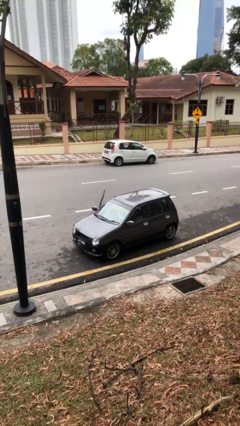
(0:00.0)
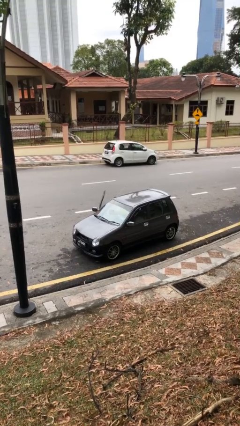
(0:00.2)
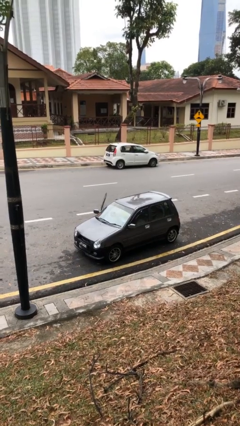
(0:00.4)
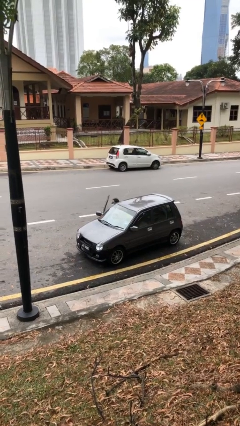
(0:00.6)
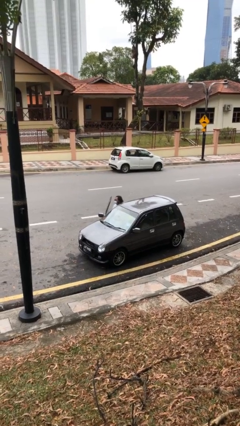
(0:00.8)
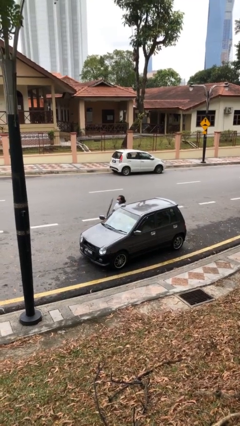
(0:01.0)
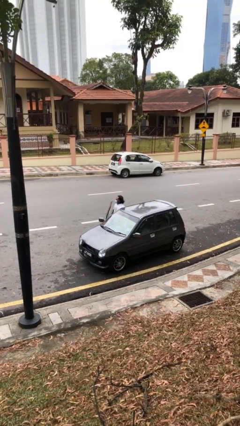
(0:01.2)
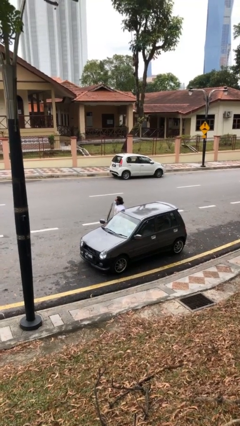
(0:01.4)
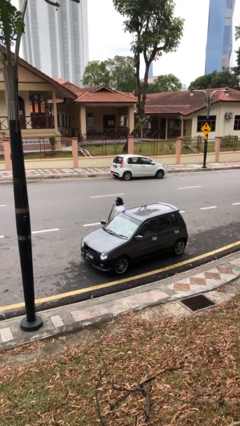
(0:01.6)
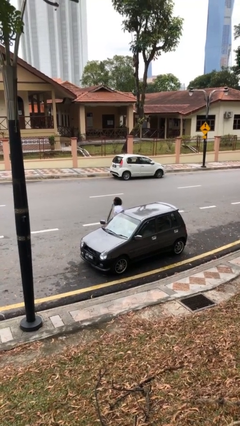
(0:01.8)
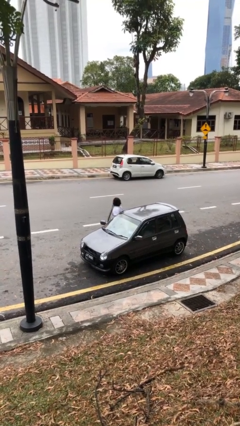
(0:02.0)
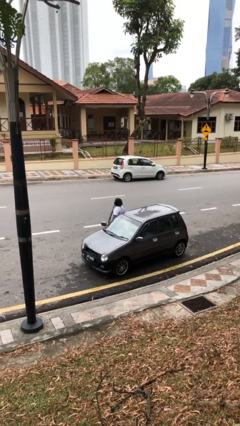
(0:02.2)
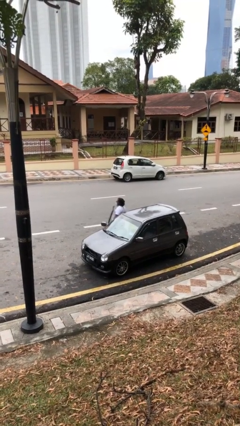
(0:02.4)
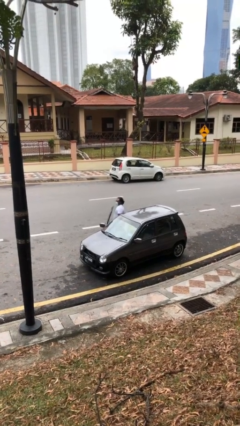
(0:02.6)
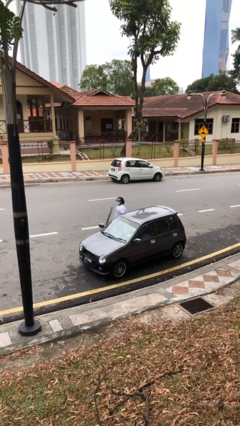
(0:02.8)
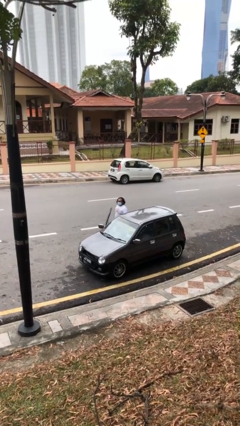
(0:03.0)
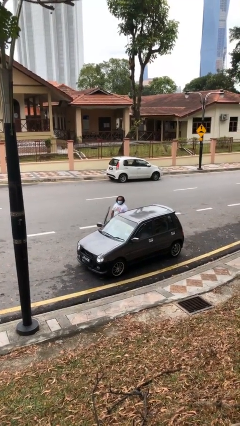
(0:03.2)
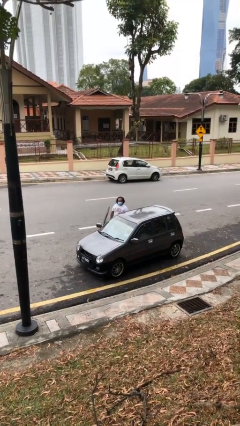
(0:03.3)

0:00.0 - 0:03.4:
person exits car

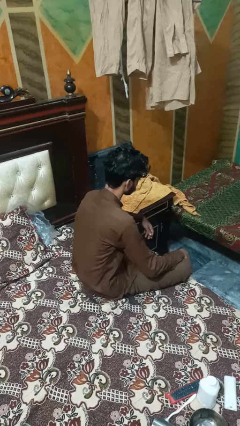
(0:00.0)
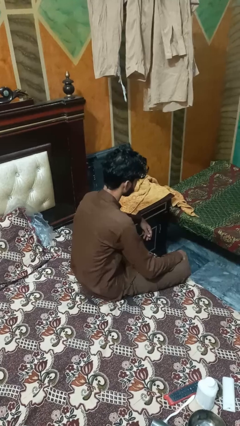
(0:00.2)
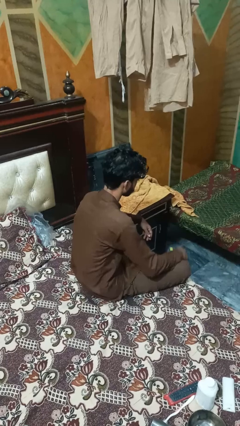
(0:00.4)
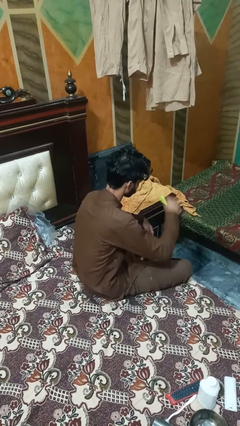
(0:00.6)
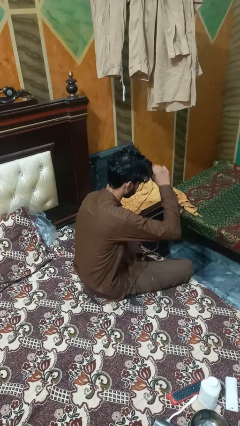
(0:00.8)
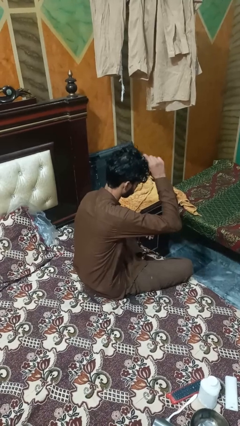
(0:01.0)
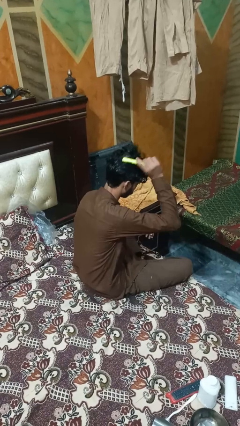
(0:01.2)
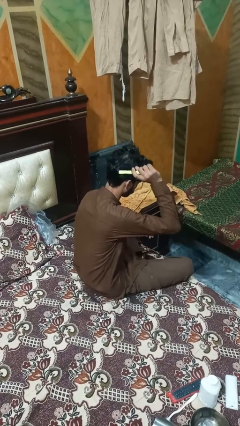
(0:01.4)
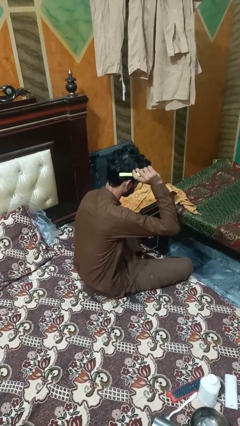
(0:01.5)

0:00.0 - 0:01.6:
person brushes hair

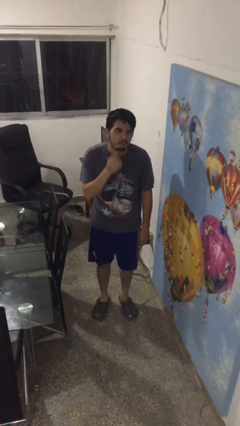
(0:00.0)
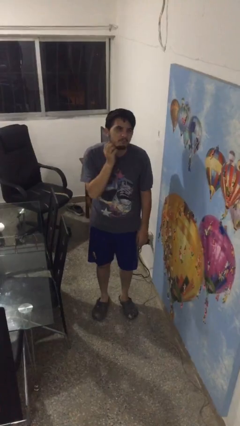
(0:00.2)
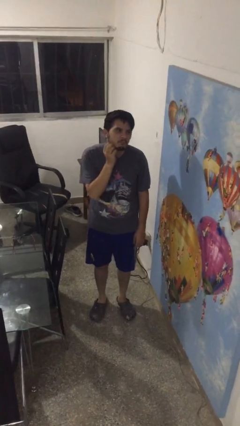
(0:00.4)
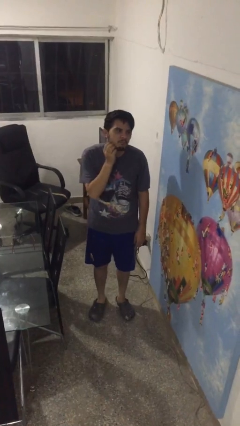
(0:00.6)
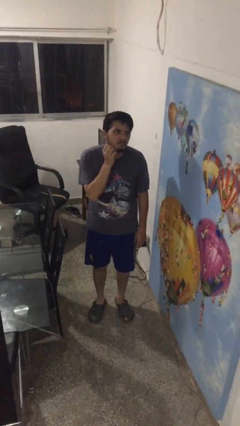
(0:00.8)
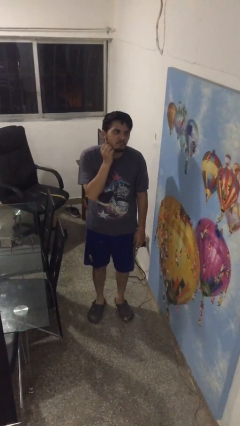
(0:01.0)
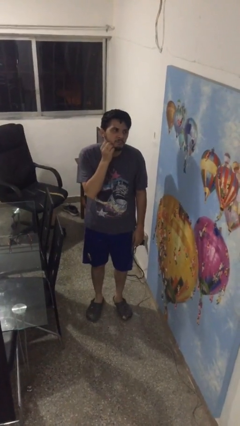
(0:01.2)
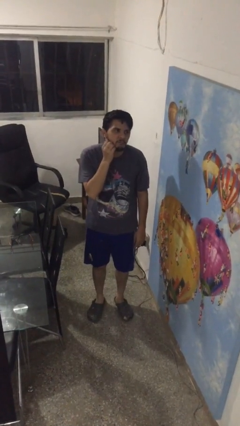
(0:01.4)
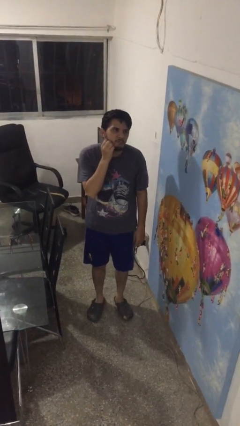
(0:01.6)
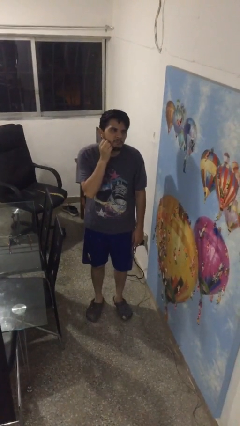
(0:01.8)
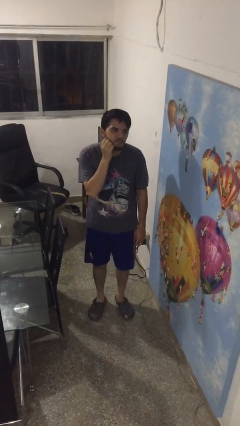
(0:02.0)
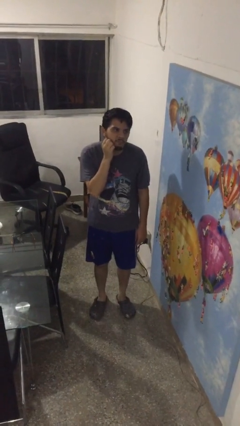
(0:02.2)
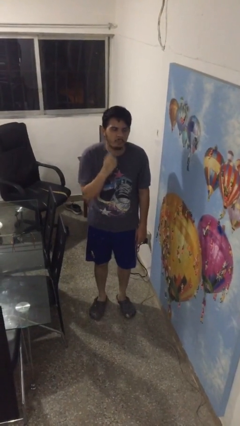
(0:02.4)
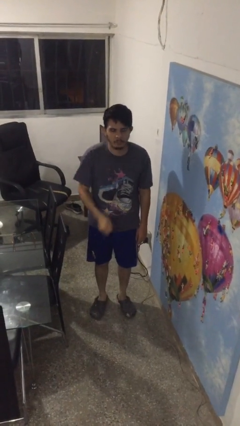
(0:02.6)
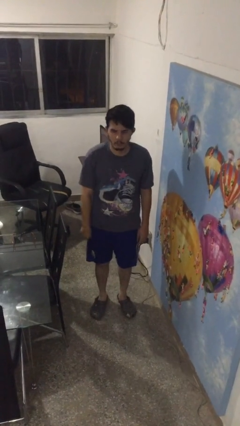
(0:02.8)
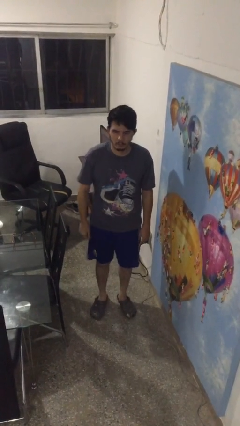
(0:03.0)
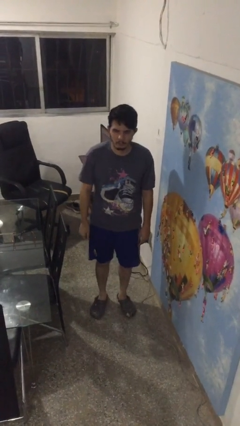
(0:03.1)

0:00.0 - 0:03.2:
person scratches face

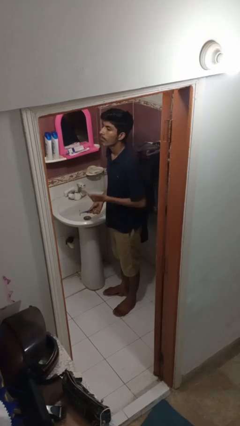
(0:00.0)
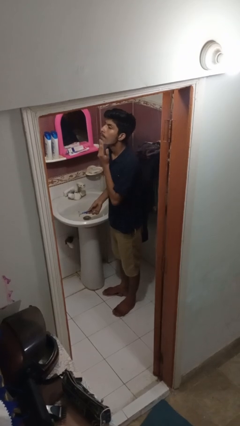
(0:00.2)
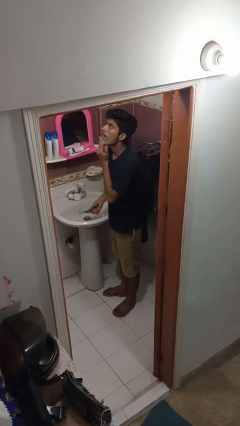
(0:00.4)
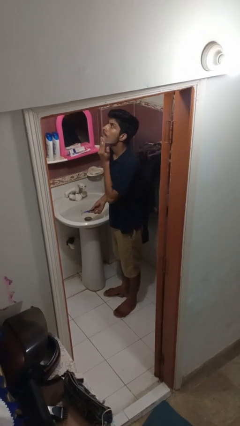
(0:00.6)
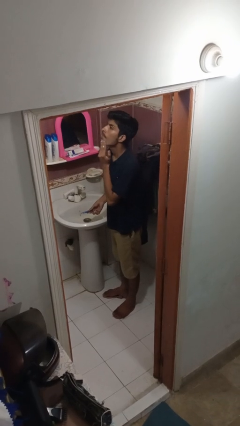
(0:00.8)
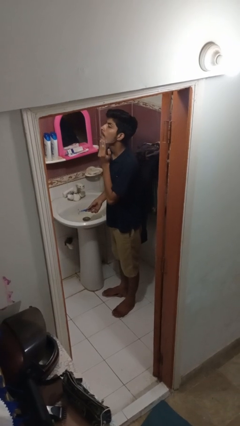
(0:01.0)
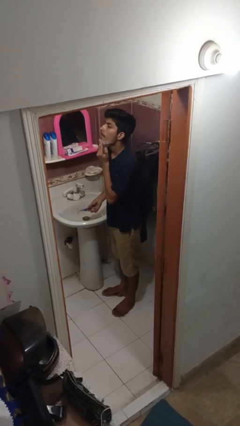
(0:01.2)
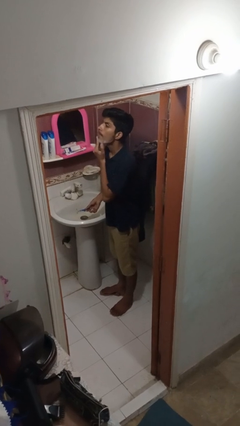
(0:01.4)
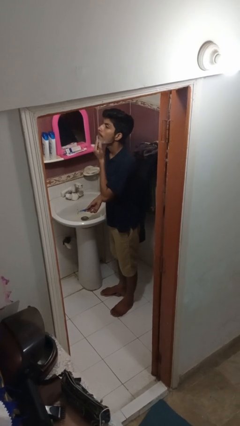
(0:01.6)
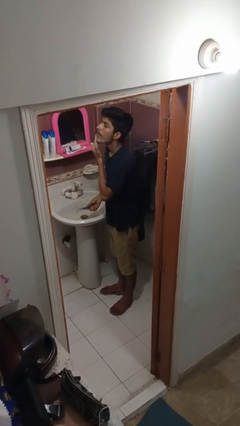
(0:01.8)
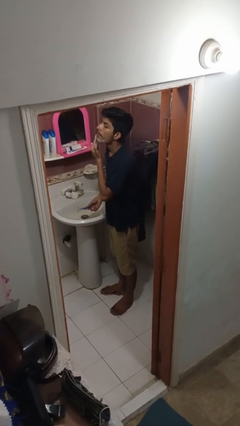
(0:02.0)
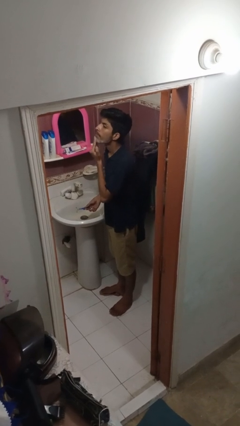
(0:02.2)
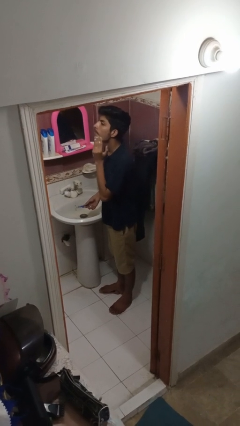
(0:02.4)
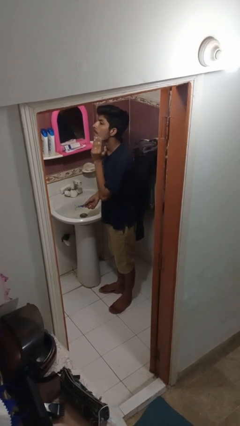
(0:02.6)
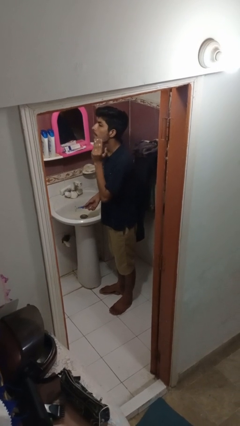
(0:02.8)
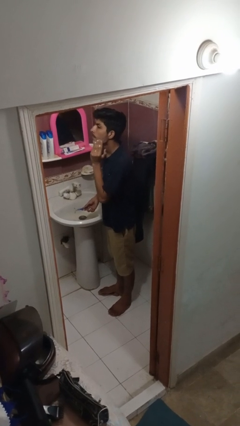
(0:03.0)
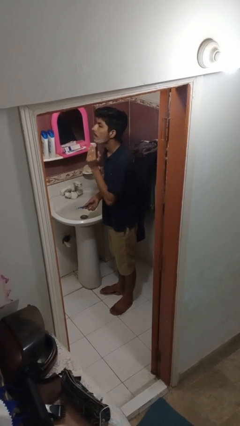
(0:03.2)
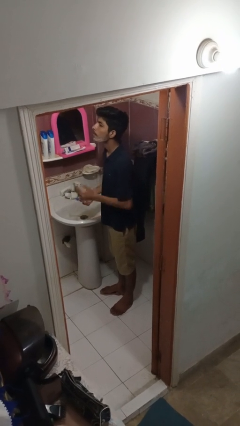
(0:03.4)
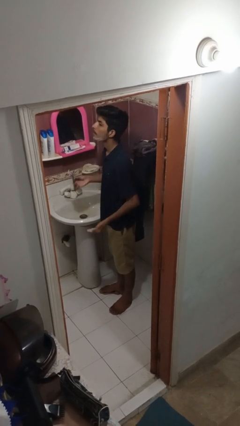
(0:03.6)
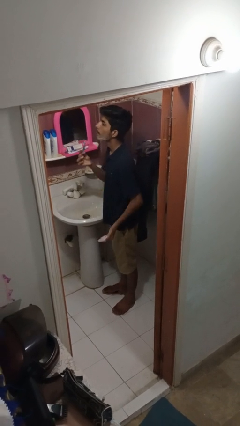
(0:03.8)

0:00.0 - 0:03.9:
person applies shaving cream

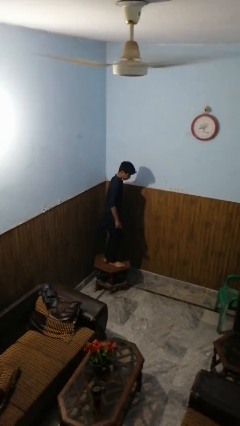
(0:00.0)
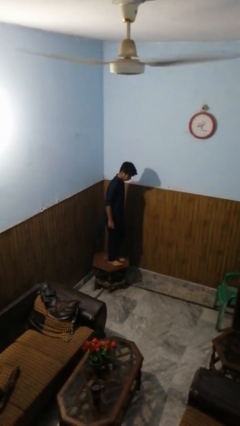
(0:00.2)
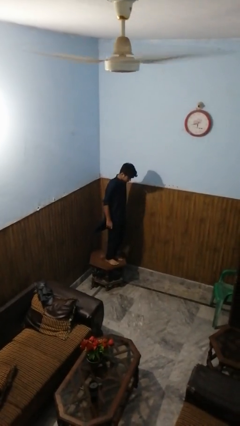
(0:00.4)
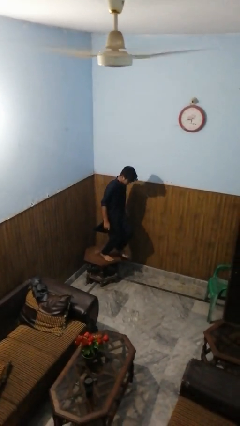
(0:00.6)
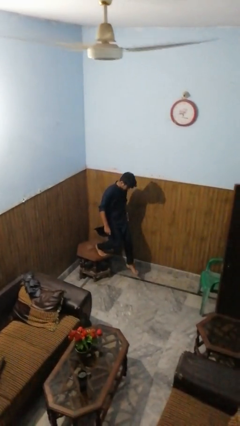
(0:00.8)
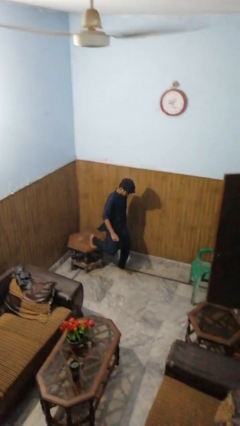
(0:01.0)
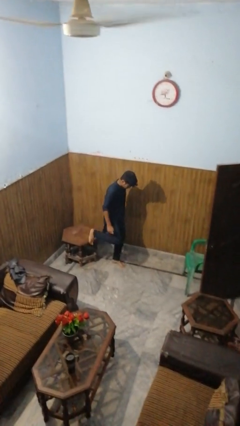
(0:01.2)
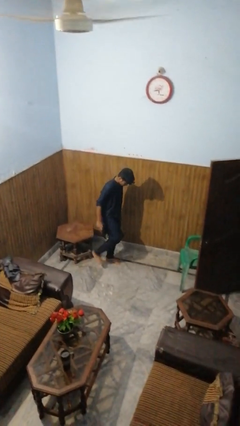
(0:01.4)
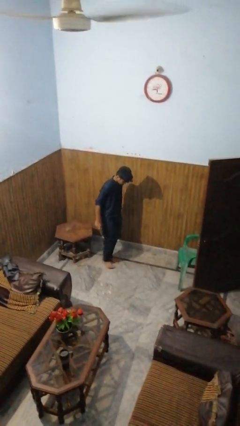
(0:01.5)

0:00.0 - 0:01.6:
person climbs off table

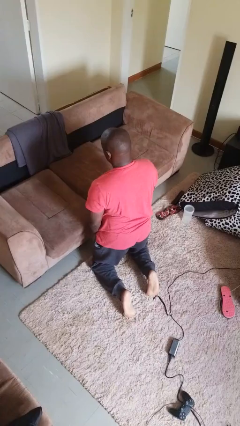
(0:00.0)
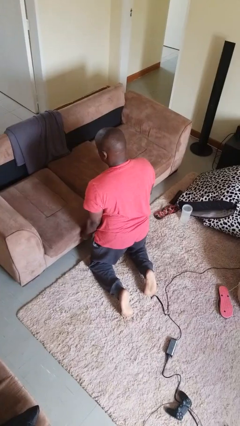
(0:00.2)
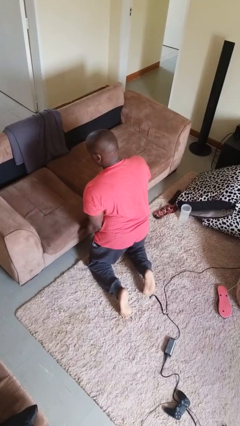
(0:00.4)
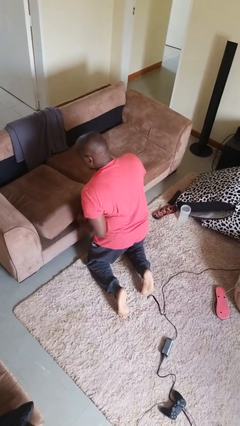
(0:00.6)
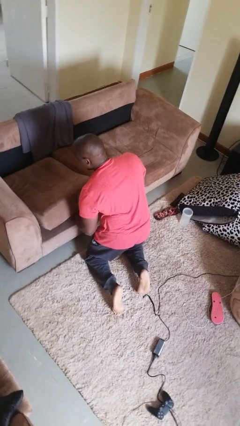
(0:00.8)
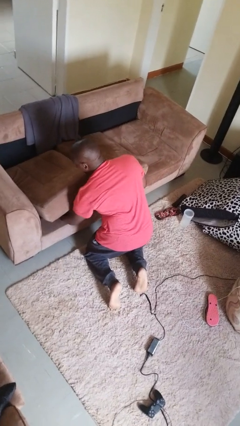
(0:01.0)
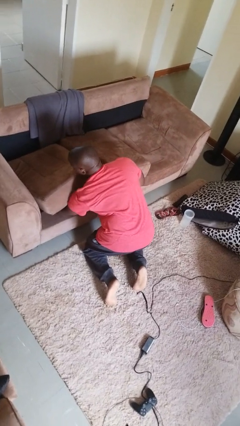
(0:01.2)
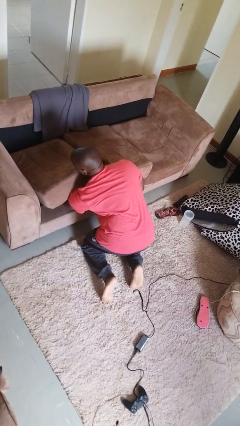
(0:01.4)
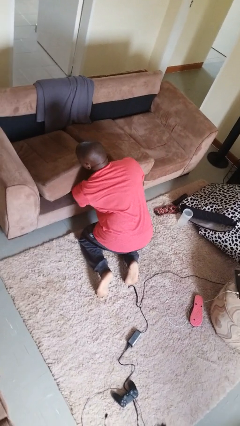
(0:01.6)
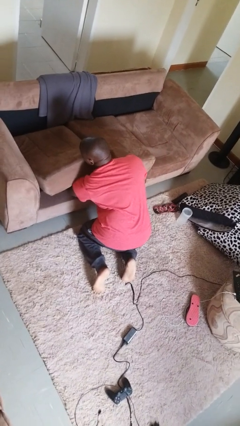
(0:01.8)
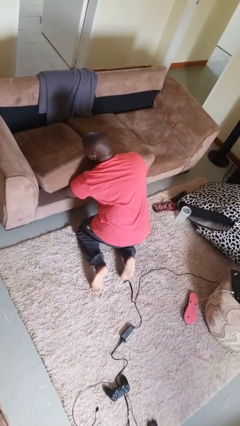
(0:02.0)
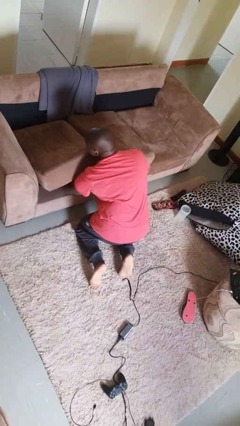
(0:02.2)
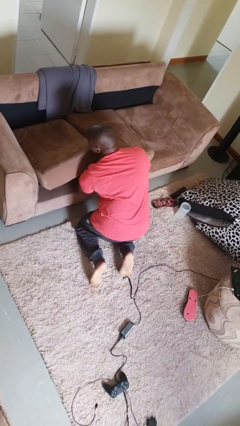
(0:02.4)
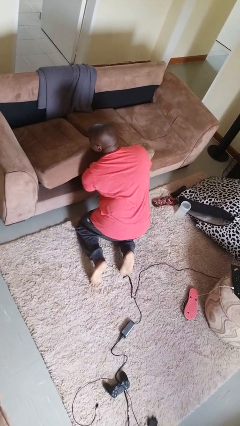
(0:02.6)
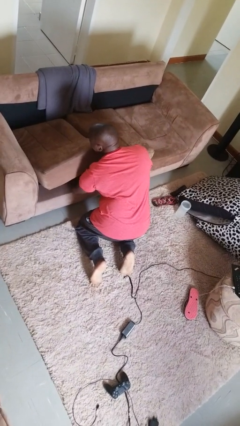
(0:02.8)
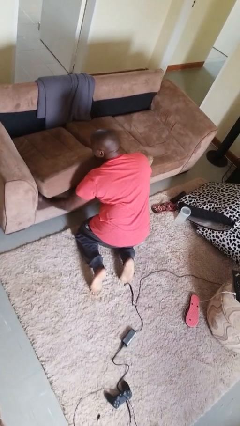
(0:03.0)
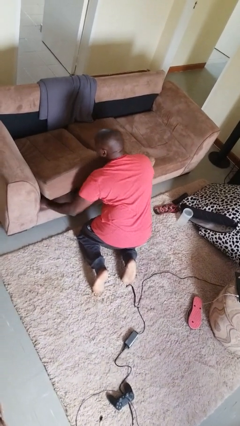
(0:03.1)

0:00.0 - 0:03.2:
person searches under couch

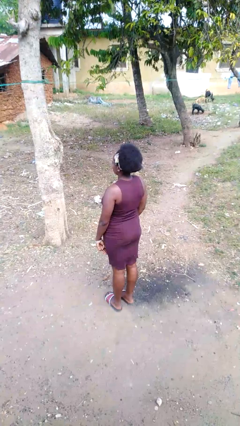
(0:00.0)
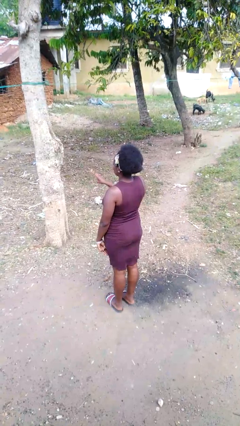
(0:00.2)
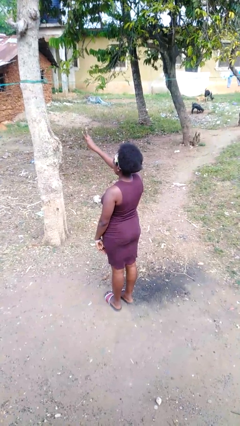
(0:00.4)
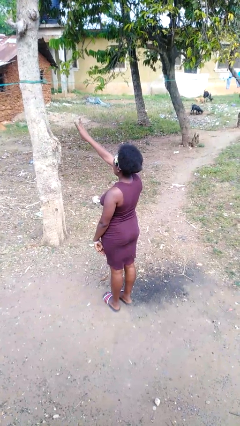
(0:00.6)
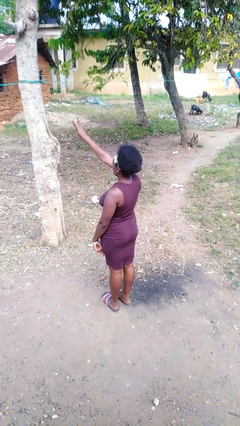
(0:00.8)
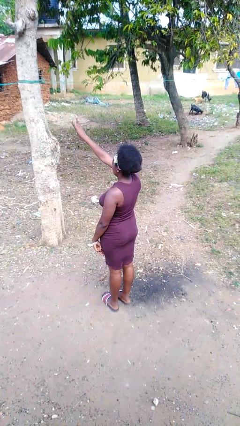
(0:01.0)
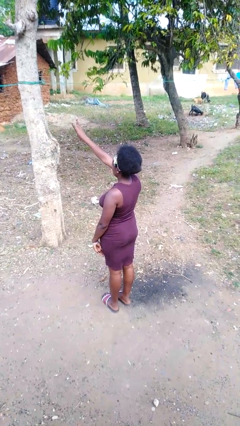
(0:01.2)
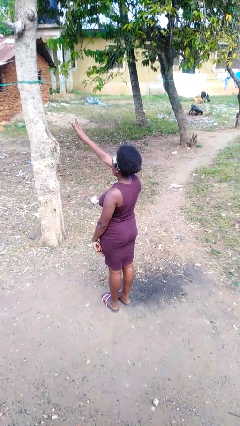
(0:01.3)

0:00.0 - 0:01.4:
person gestures number three
